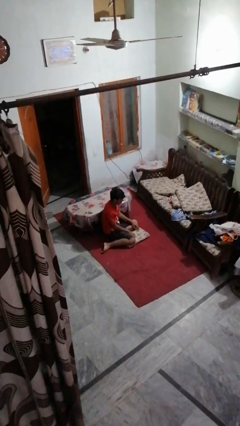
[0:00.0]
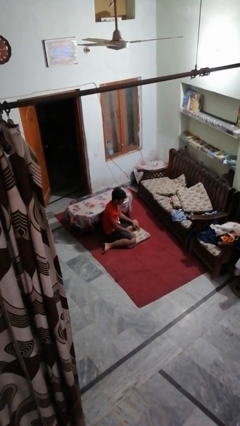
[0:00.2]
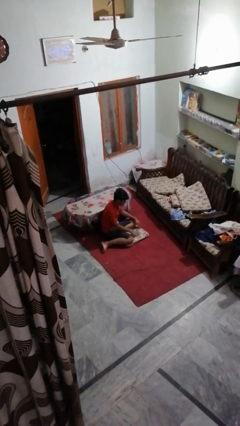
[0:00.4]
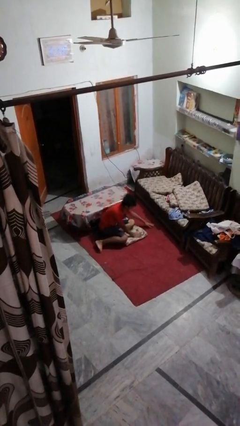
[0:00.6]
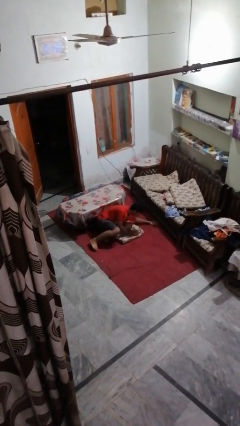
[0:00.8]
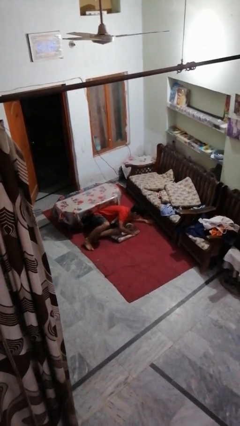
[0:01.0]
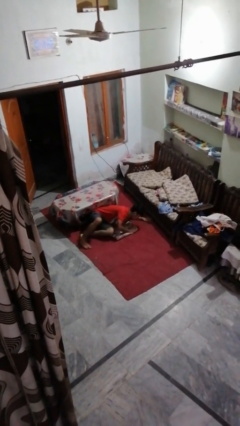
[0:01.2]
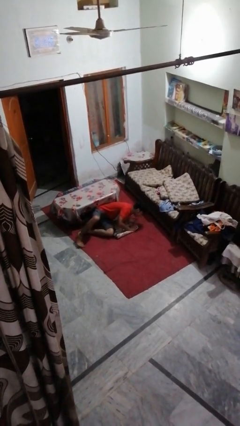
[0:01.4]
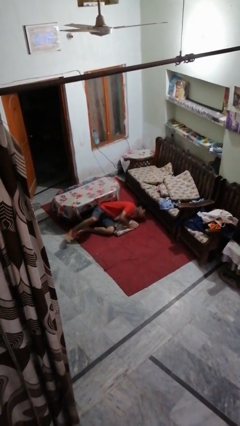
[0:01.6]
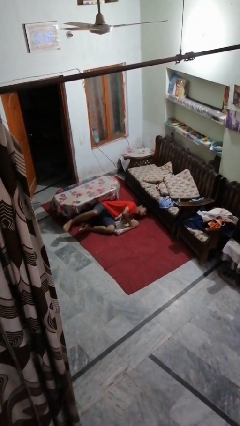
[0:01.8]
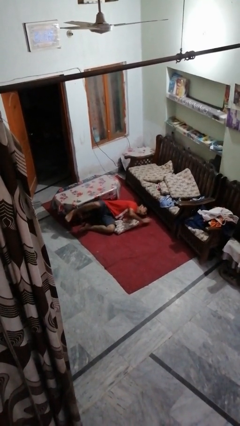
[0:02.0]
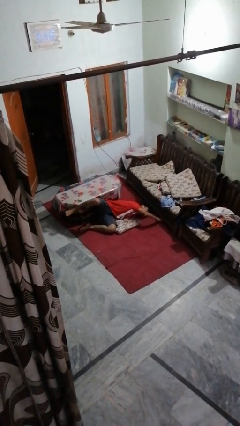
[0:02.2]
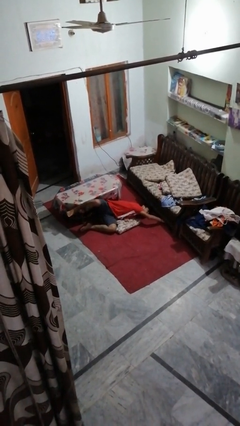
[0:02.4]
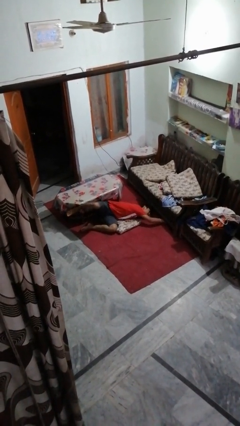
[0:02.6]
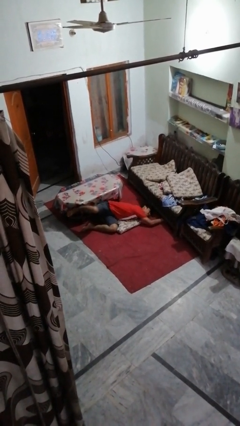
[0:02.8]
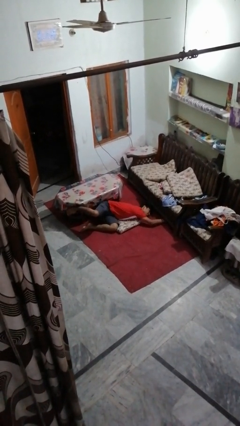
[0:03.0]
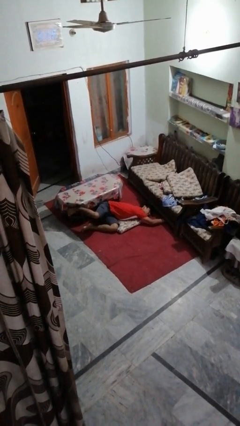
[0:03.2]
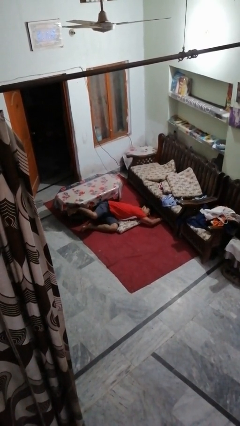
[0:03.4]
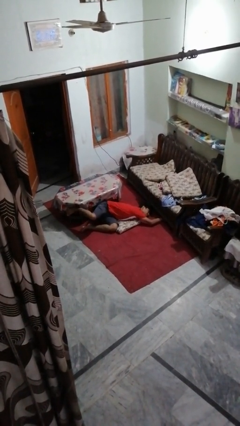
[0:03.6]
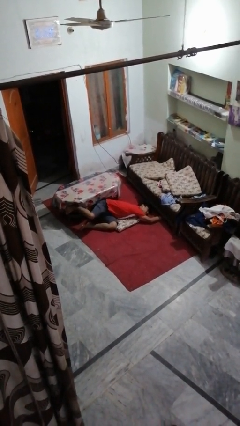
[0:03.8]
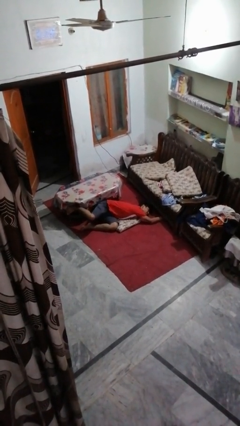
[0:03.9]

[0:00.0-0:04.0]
person searches under couch

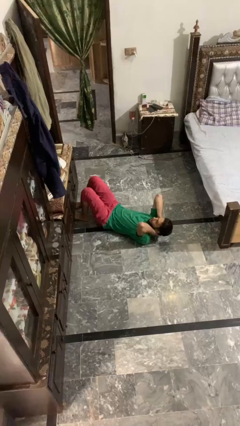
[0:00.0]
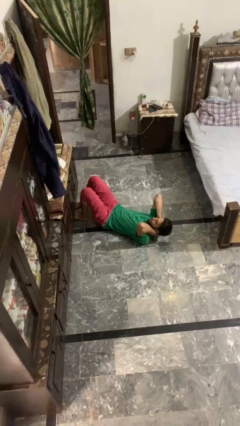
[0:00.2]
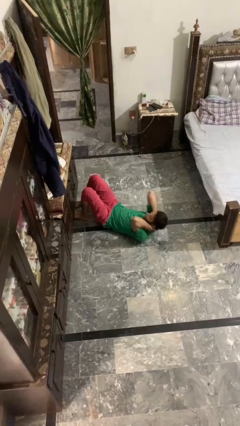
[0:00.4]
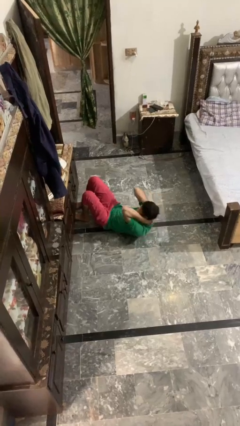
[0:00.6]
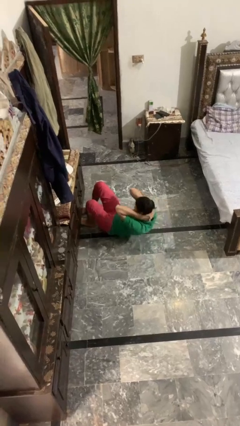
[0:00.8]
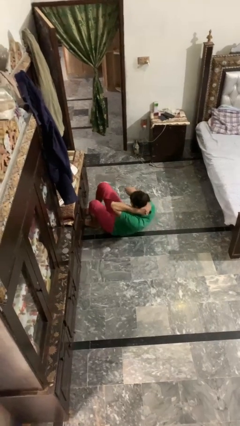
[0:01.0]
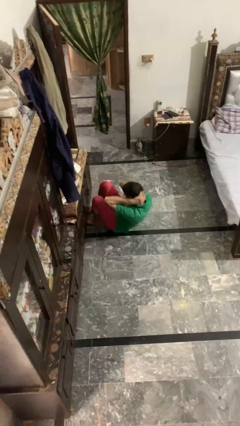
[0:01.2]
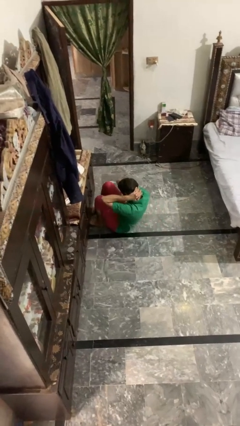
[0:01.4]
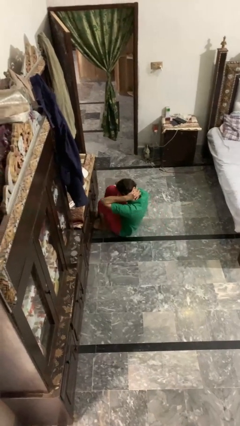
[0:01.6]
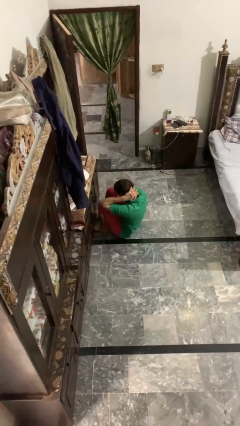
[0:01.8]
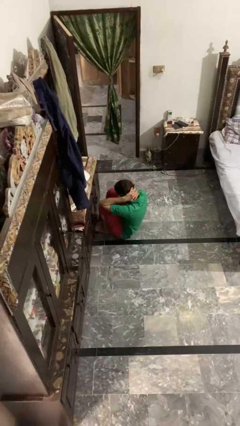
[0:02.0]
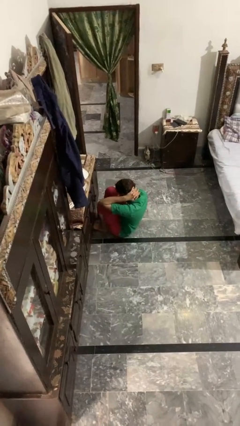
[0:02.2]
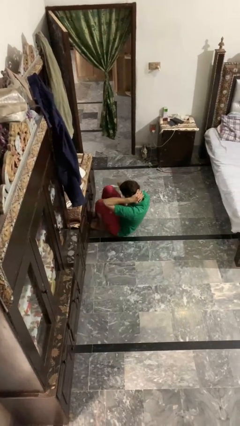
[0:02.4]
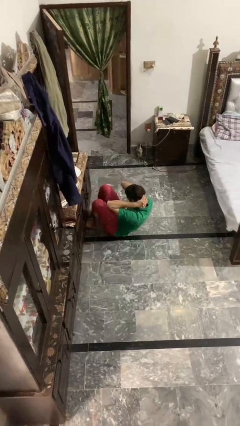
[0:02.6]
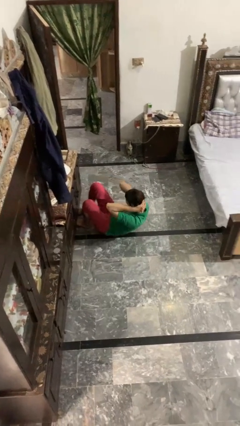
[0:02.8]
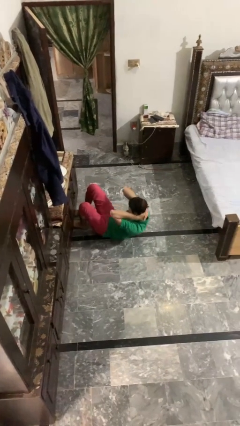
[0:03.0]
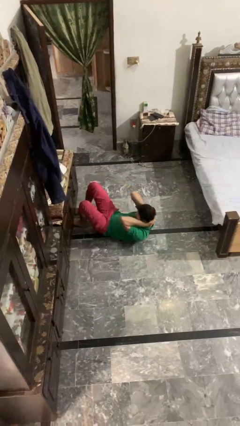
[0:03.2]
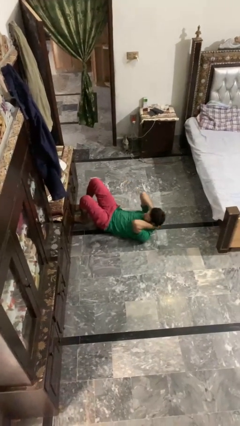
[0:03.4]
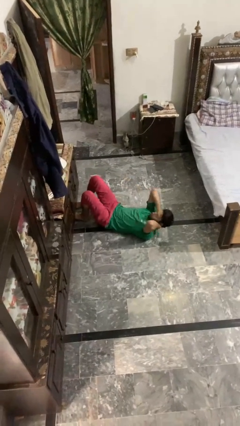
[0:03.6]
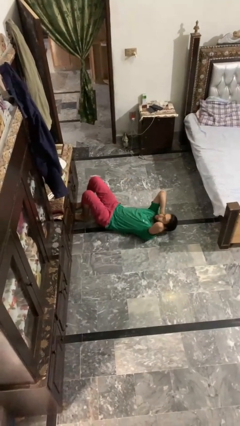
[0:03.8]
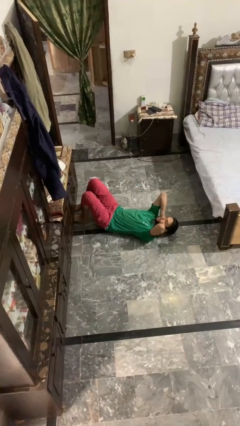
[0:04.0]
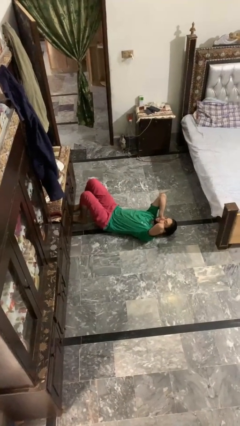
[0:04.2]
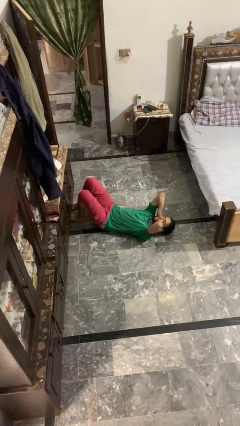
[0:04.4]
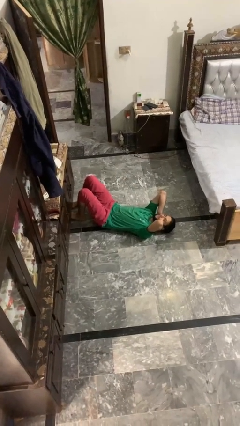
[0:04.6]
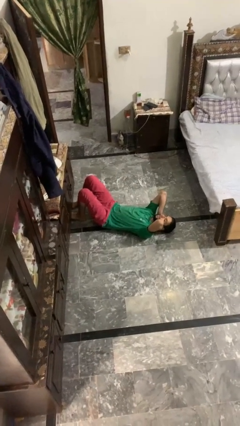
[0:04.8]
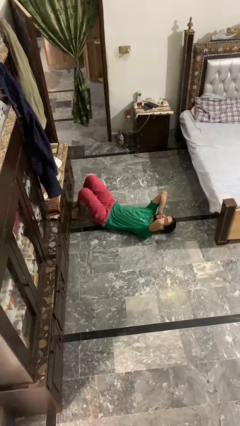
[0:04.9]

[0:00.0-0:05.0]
person exercises with situp

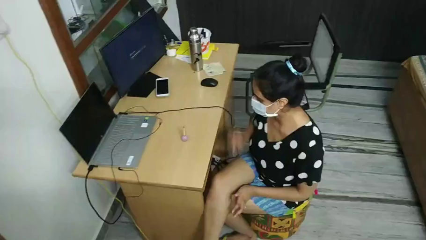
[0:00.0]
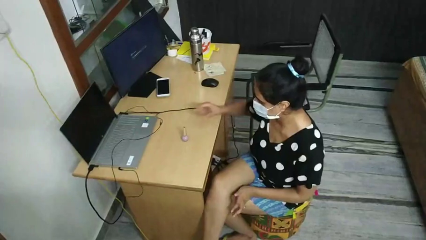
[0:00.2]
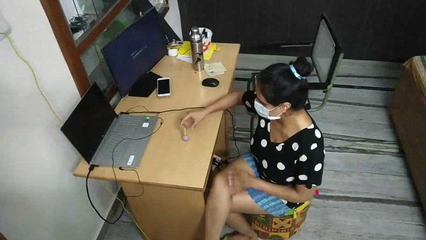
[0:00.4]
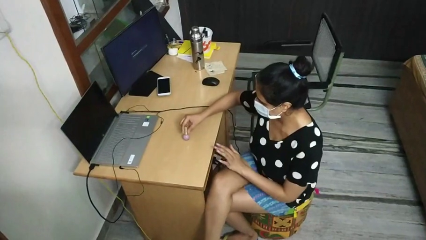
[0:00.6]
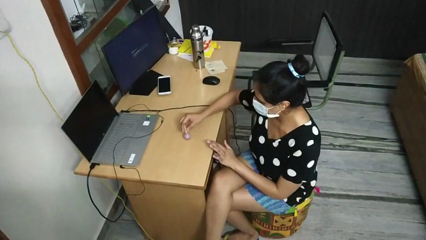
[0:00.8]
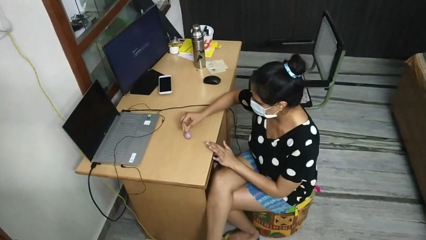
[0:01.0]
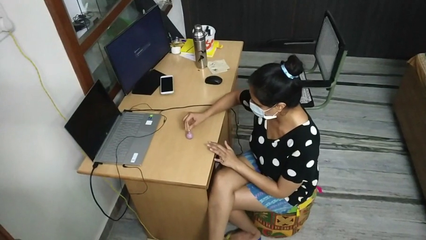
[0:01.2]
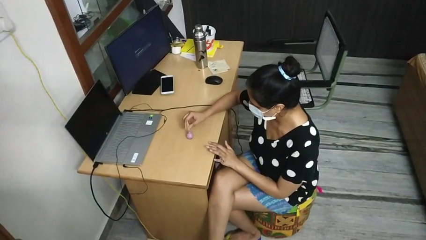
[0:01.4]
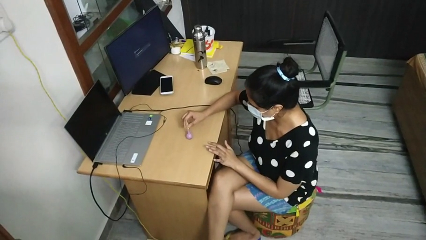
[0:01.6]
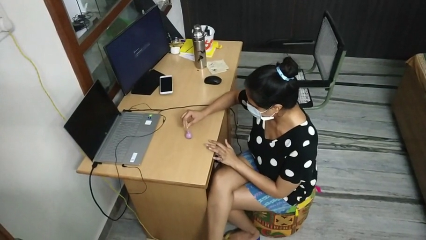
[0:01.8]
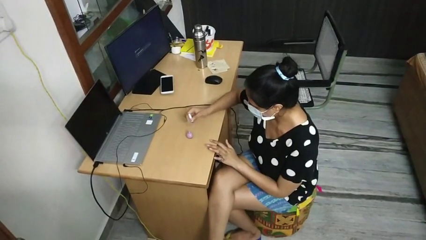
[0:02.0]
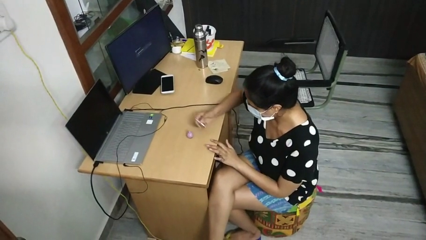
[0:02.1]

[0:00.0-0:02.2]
person paints fingernails

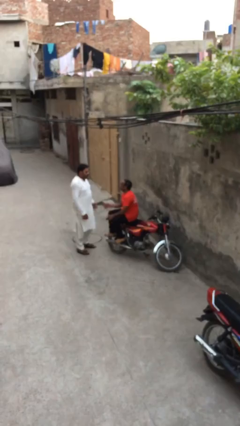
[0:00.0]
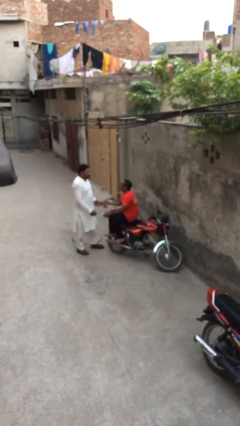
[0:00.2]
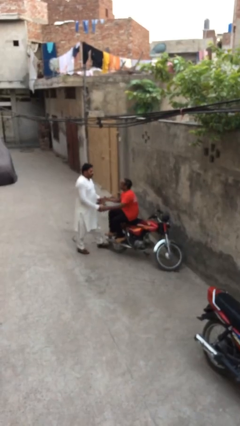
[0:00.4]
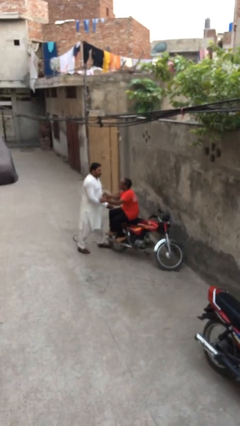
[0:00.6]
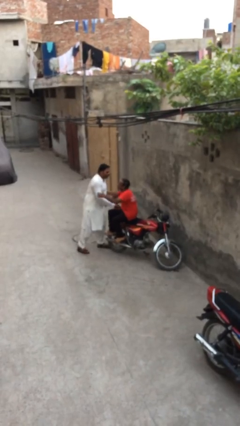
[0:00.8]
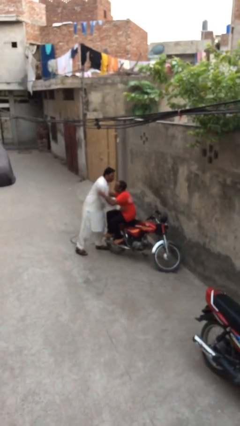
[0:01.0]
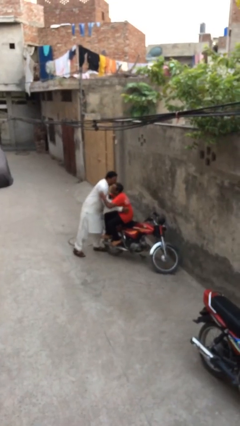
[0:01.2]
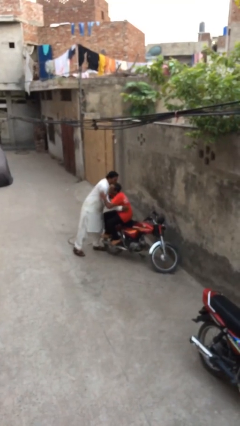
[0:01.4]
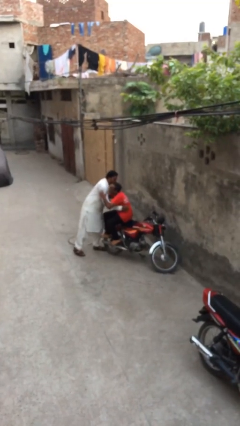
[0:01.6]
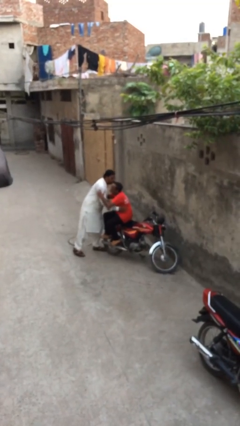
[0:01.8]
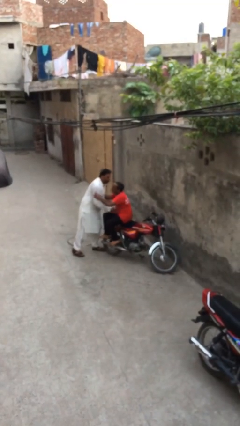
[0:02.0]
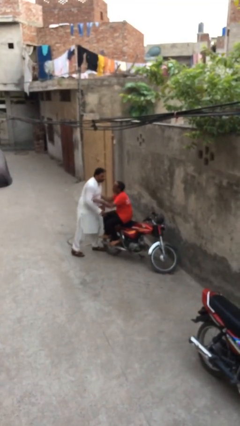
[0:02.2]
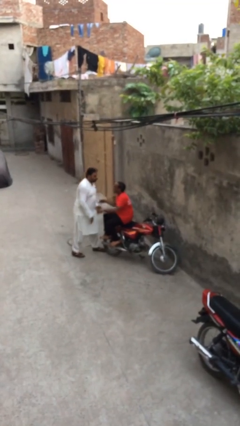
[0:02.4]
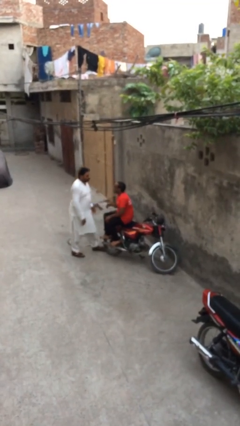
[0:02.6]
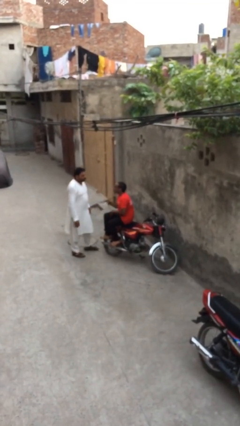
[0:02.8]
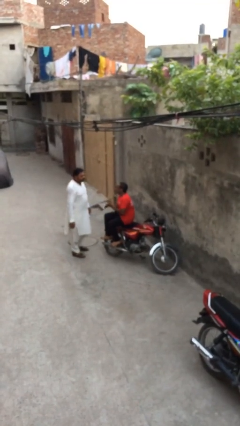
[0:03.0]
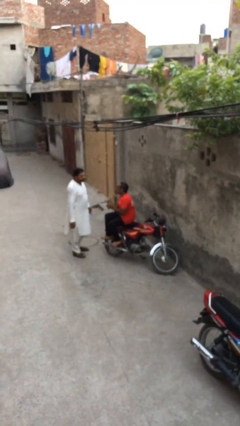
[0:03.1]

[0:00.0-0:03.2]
person embraces person

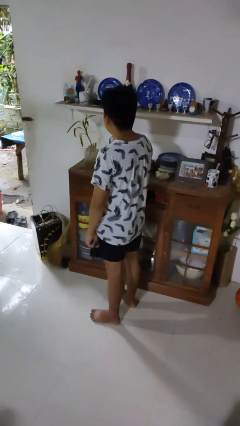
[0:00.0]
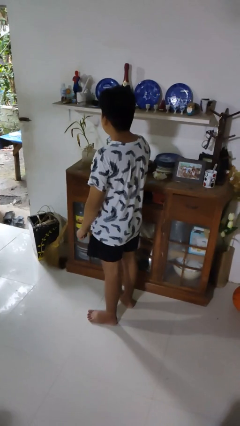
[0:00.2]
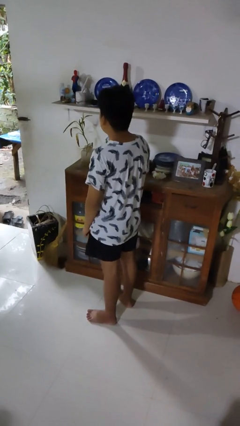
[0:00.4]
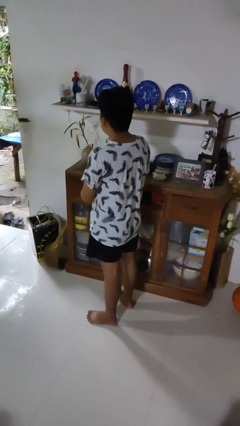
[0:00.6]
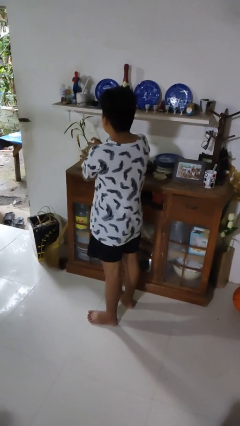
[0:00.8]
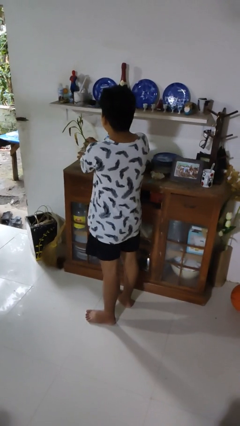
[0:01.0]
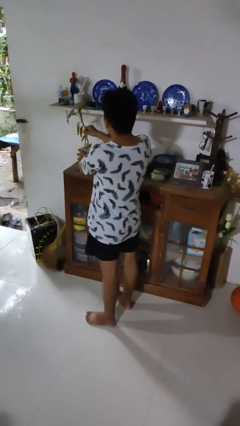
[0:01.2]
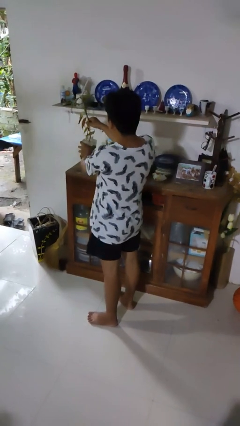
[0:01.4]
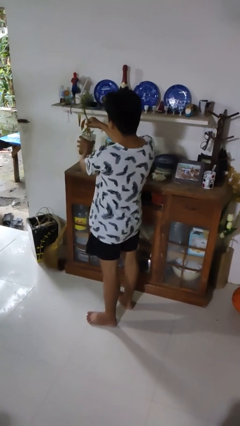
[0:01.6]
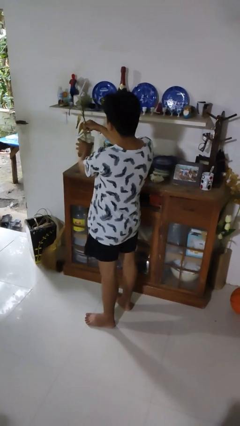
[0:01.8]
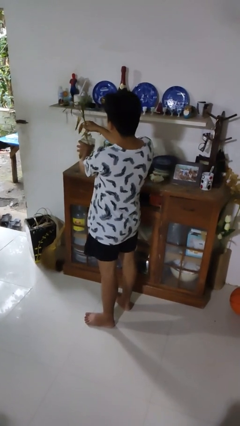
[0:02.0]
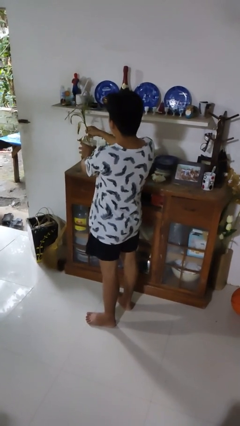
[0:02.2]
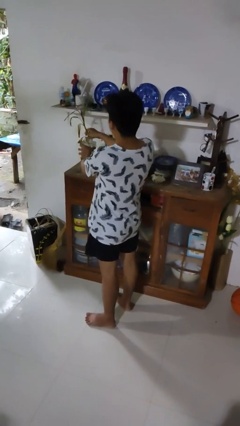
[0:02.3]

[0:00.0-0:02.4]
person arranges flowers in vase

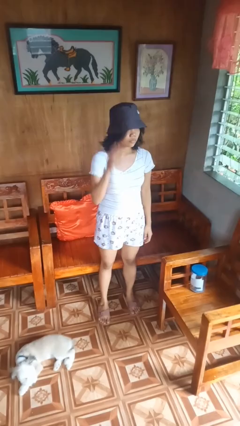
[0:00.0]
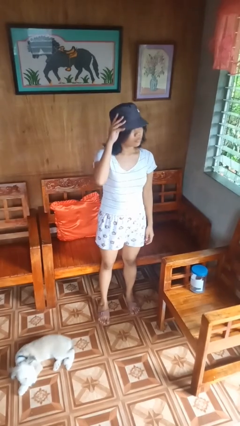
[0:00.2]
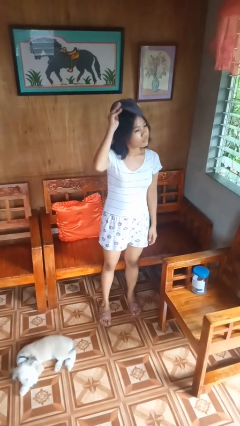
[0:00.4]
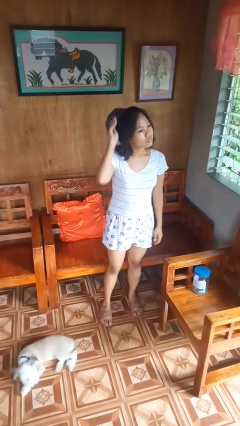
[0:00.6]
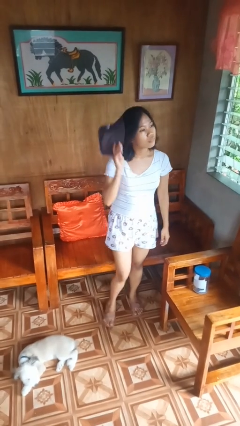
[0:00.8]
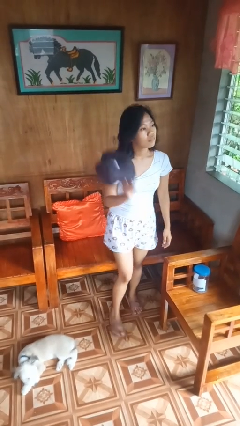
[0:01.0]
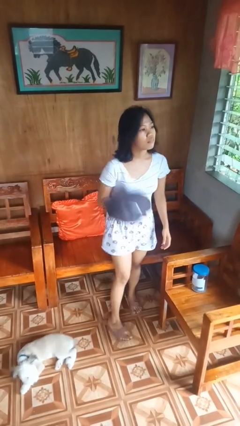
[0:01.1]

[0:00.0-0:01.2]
person takes off hat
